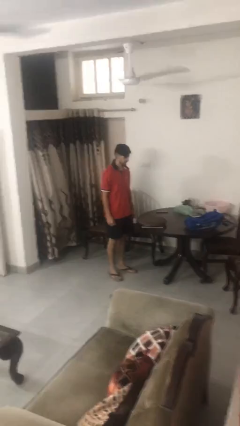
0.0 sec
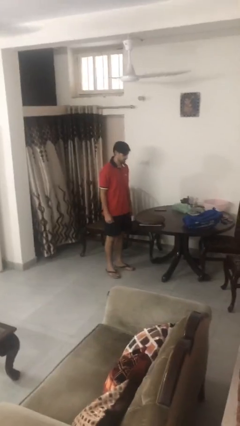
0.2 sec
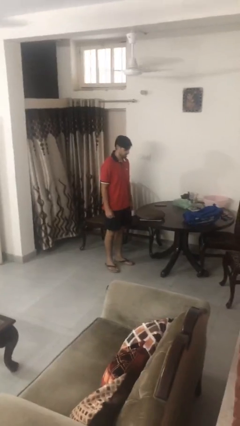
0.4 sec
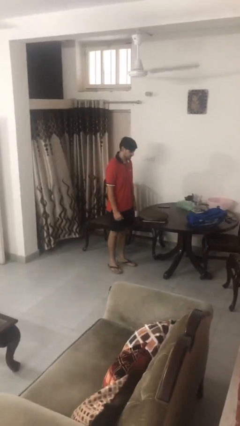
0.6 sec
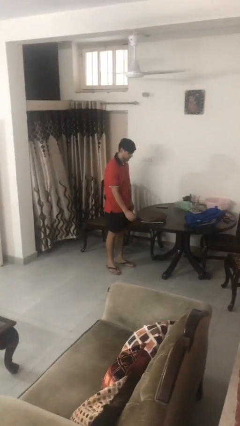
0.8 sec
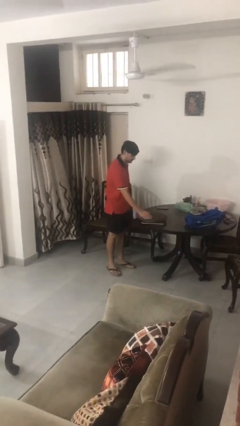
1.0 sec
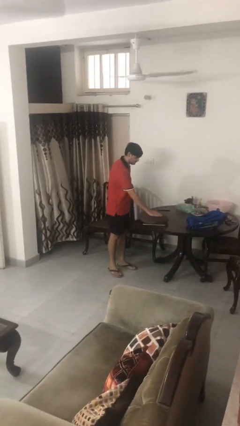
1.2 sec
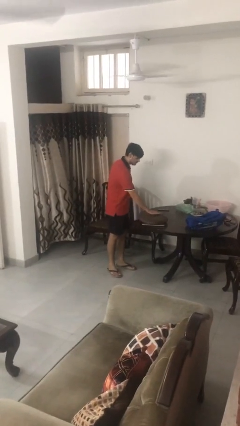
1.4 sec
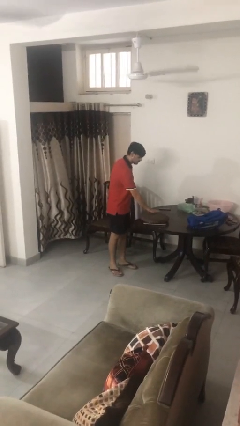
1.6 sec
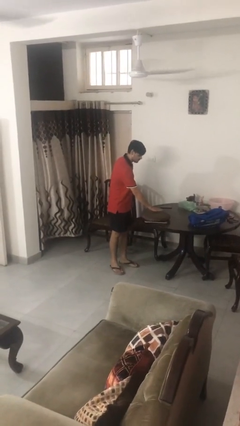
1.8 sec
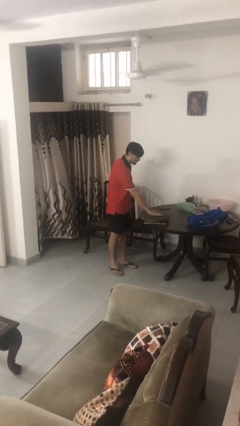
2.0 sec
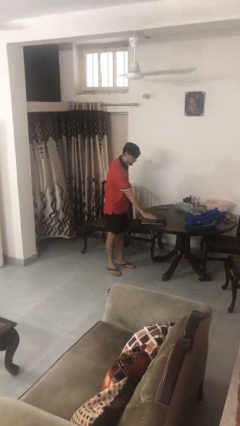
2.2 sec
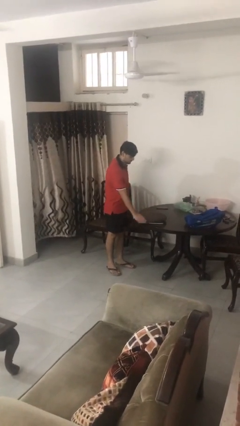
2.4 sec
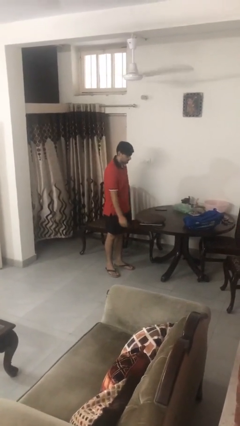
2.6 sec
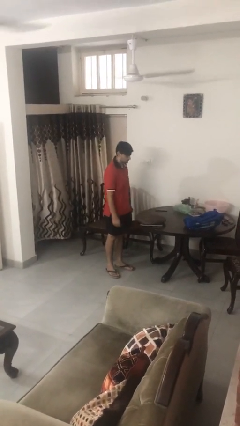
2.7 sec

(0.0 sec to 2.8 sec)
person waves hand over object

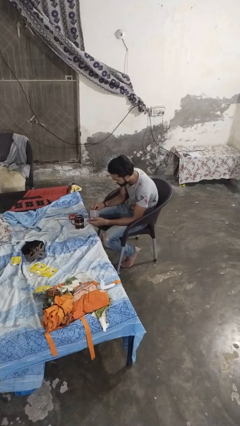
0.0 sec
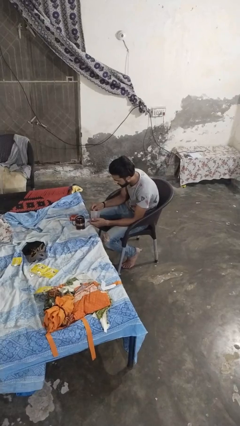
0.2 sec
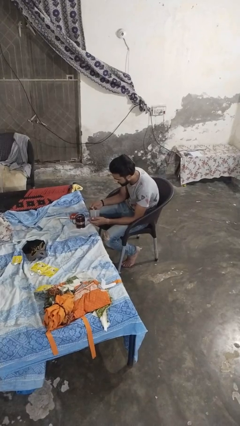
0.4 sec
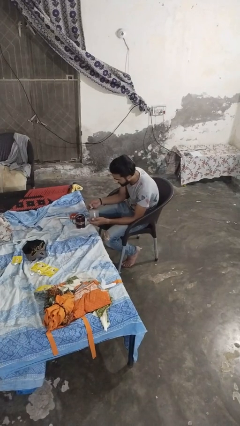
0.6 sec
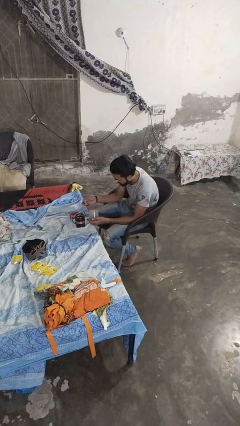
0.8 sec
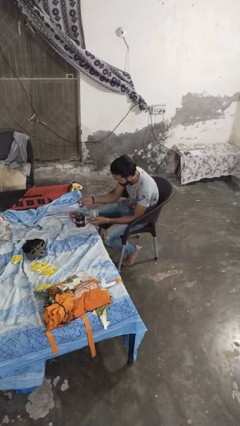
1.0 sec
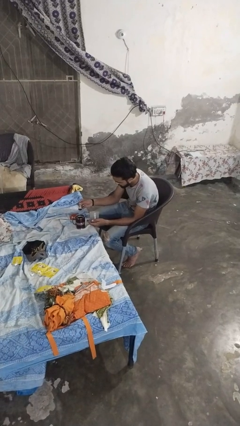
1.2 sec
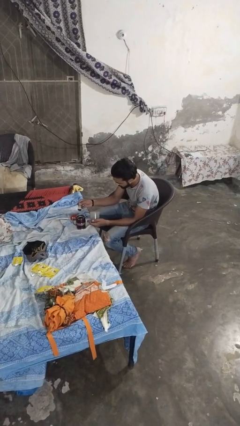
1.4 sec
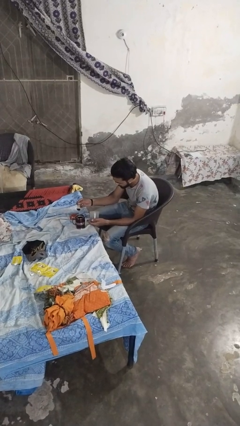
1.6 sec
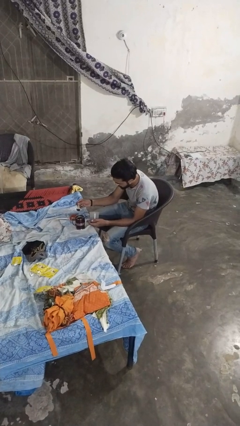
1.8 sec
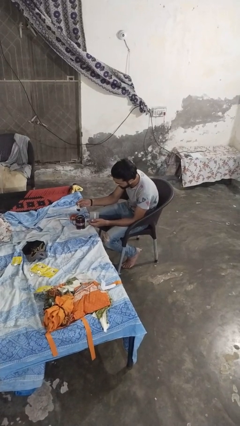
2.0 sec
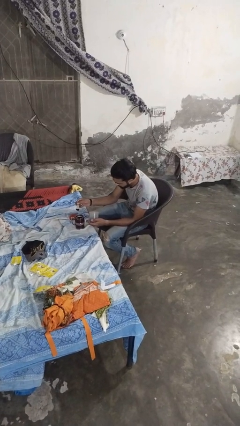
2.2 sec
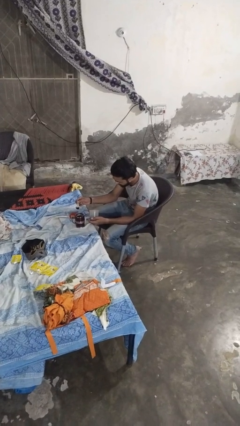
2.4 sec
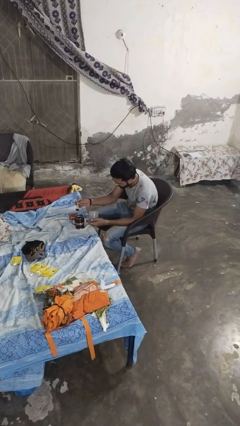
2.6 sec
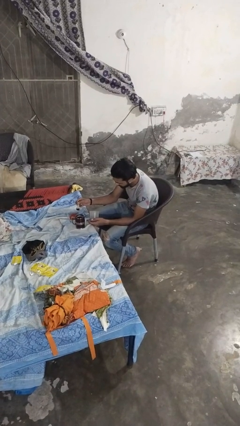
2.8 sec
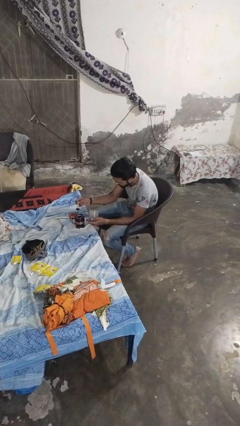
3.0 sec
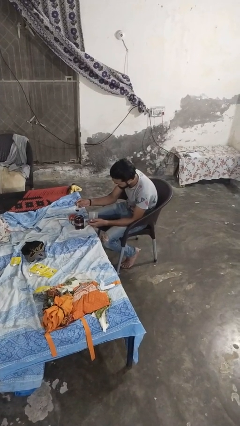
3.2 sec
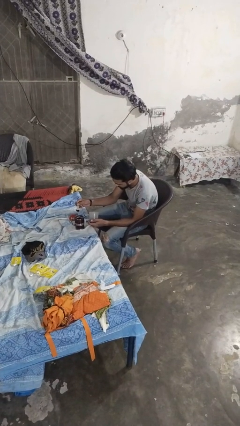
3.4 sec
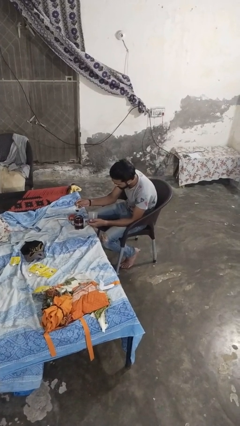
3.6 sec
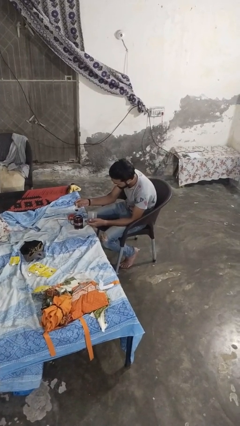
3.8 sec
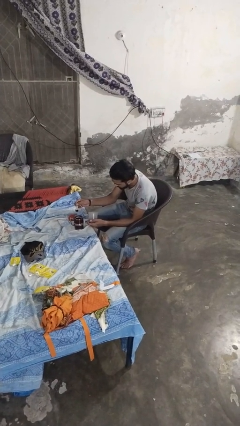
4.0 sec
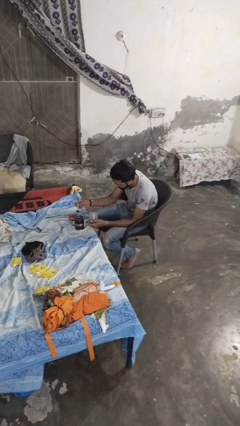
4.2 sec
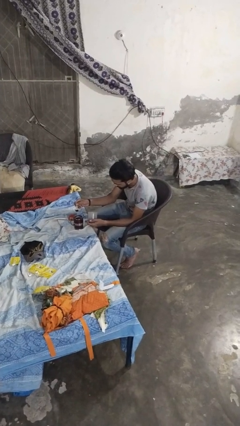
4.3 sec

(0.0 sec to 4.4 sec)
person pours coffee into mug

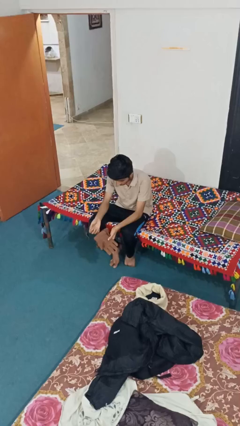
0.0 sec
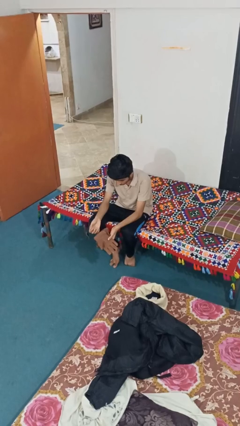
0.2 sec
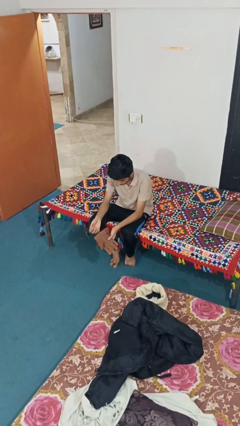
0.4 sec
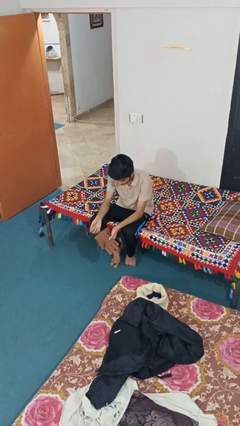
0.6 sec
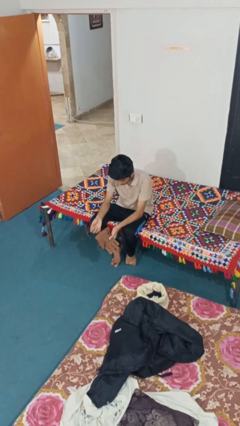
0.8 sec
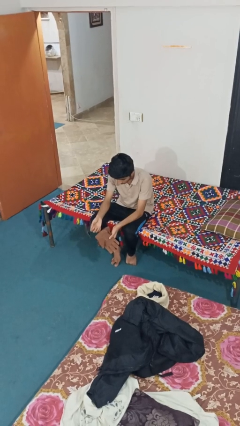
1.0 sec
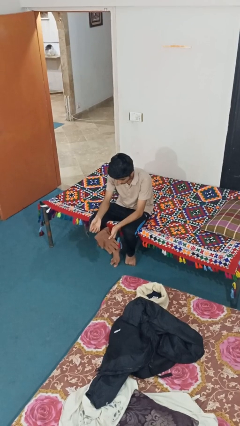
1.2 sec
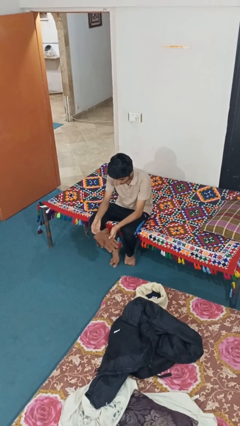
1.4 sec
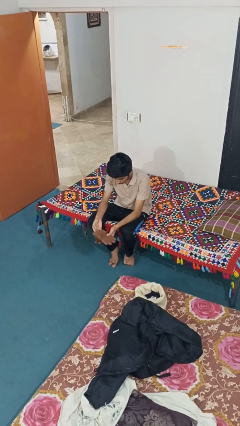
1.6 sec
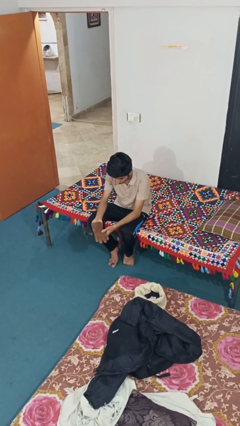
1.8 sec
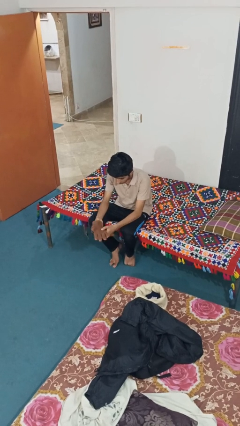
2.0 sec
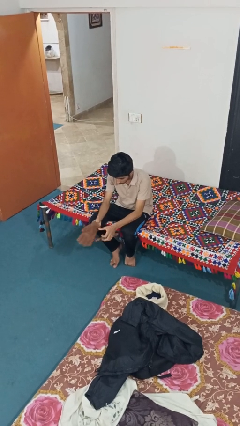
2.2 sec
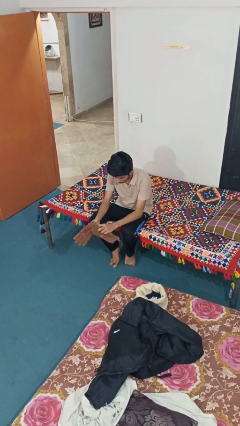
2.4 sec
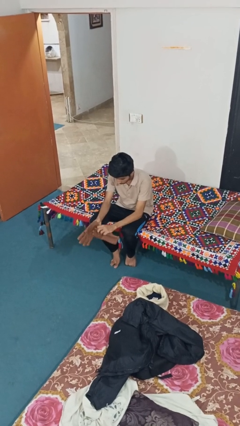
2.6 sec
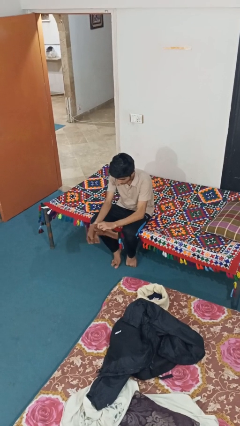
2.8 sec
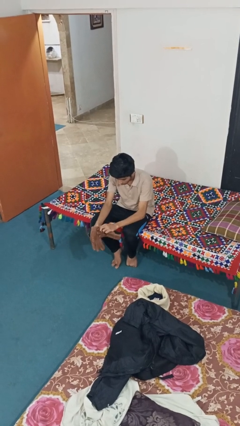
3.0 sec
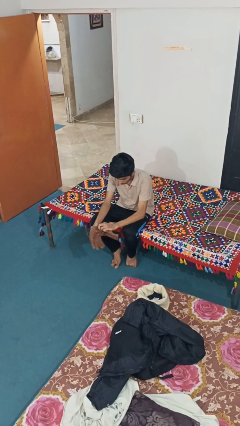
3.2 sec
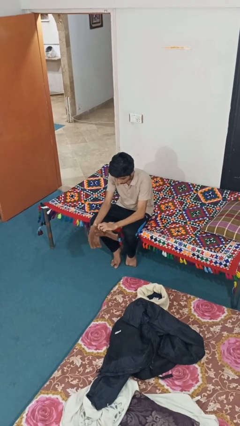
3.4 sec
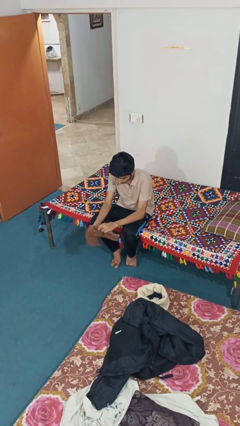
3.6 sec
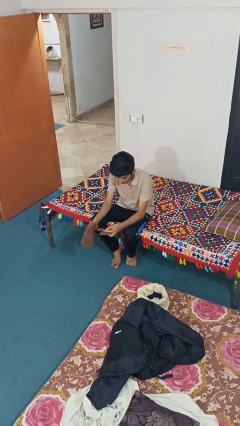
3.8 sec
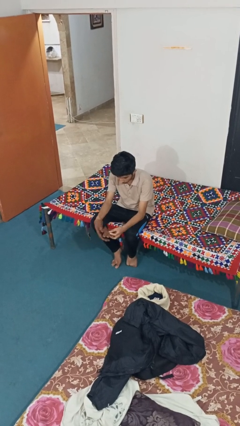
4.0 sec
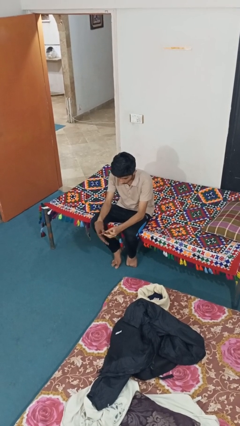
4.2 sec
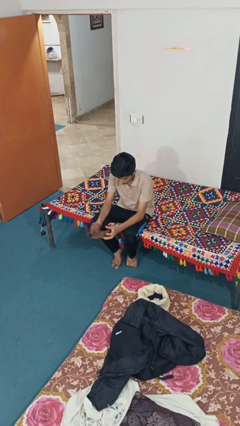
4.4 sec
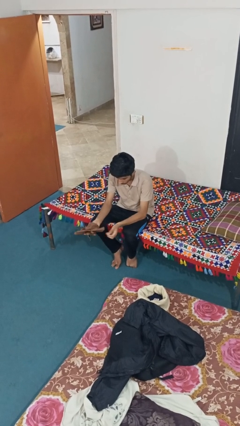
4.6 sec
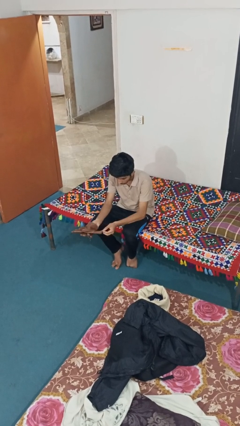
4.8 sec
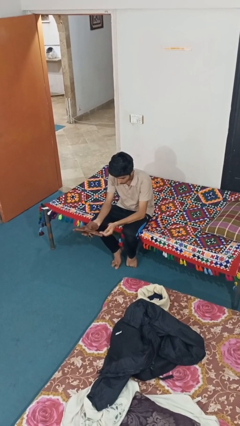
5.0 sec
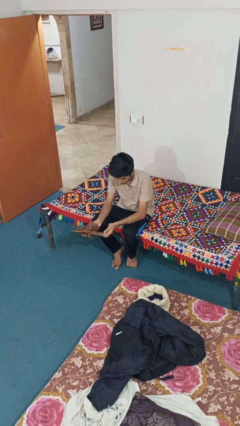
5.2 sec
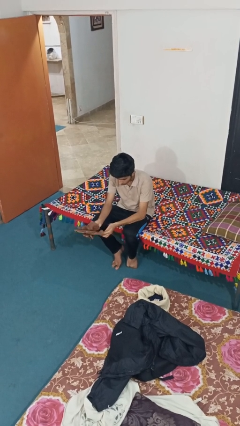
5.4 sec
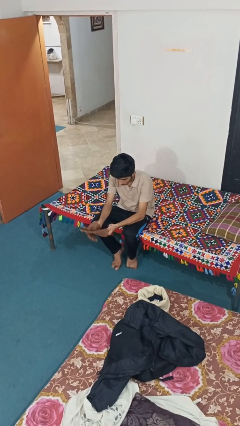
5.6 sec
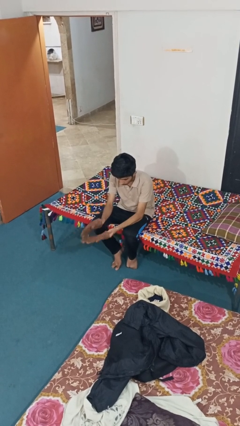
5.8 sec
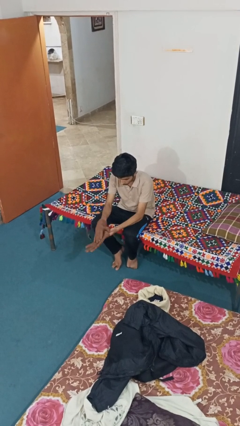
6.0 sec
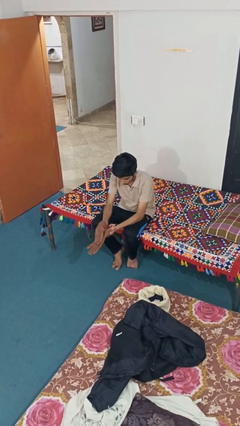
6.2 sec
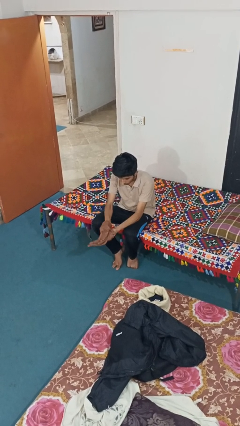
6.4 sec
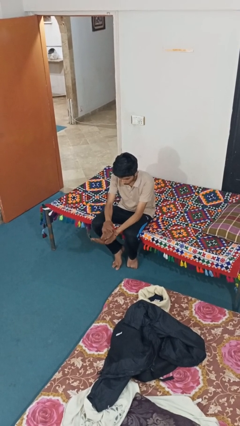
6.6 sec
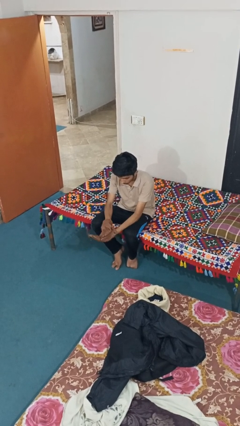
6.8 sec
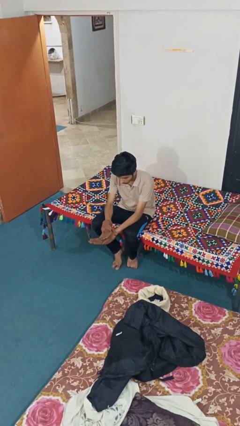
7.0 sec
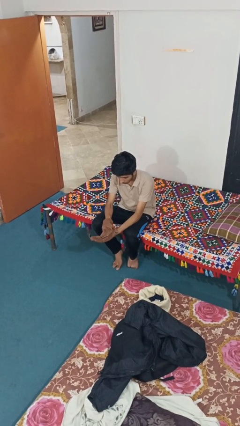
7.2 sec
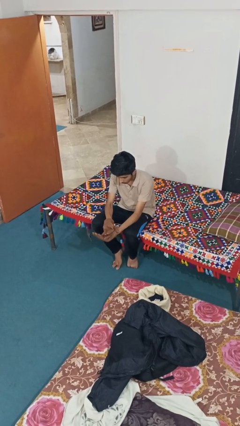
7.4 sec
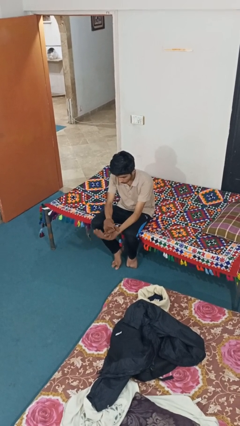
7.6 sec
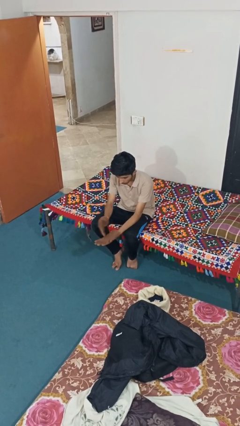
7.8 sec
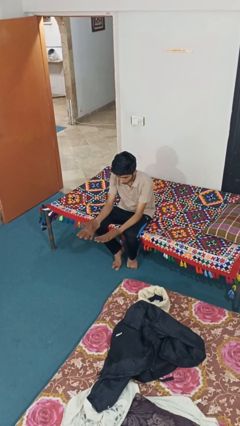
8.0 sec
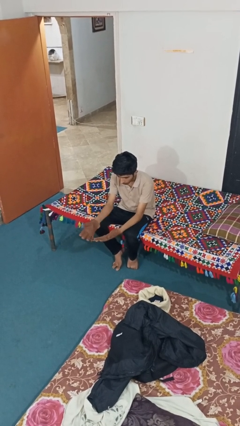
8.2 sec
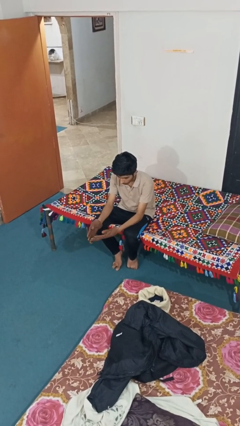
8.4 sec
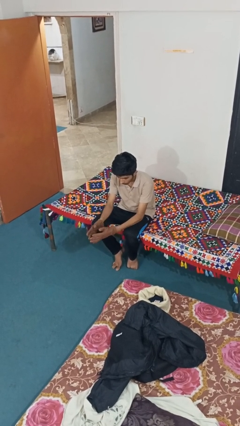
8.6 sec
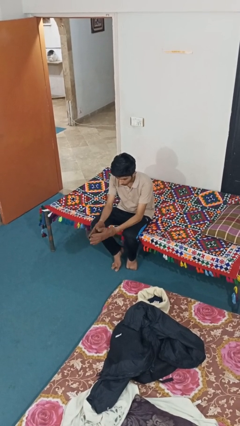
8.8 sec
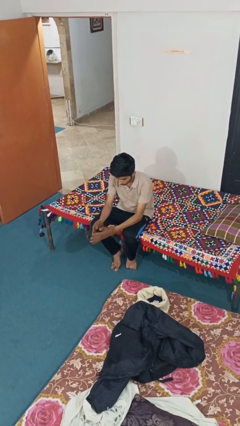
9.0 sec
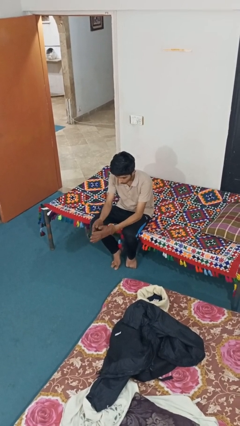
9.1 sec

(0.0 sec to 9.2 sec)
person puts on gloves

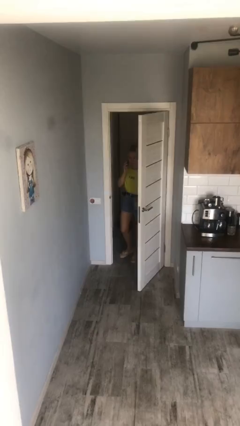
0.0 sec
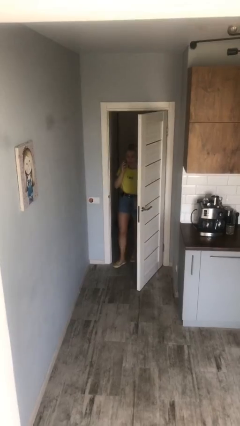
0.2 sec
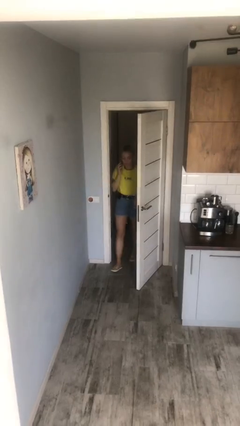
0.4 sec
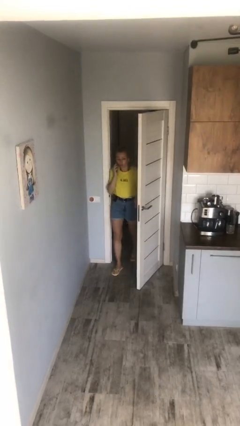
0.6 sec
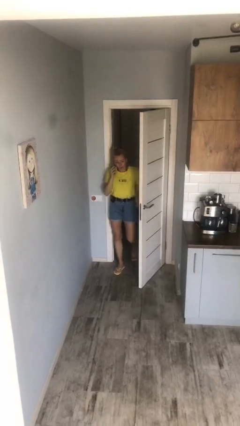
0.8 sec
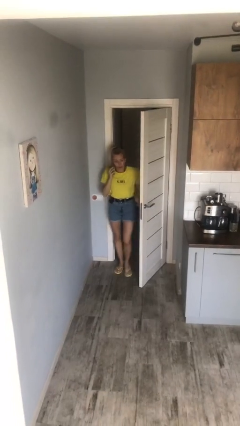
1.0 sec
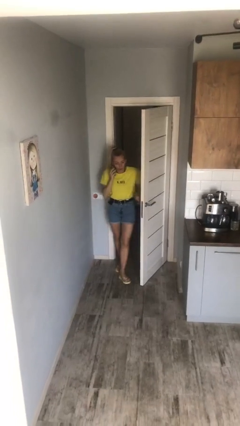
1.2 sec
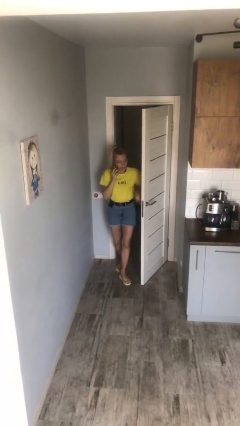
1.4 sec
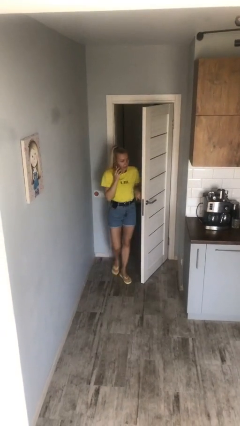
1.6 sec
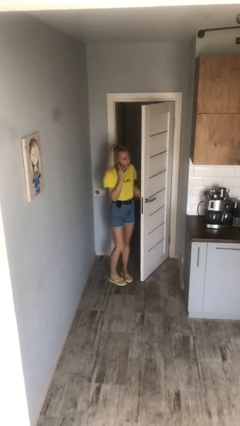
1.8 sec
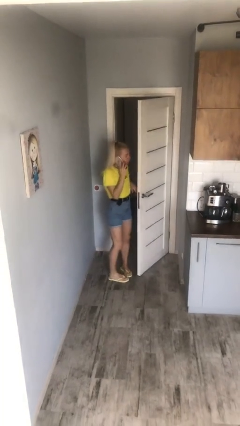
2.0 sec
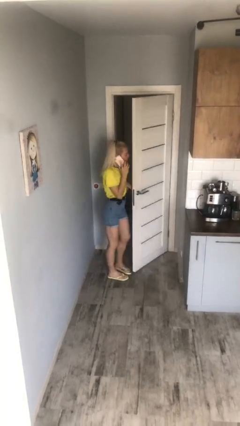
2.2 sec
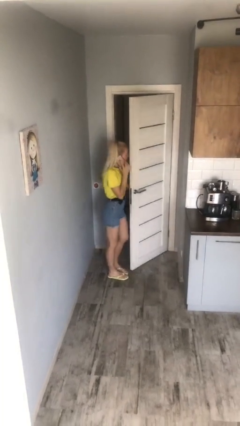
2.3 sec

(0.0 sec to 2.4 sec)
person enters scene through structure
